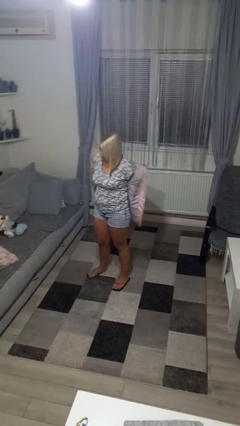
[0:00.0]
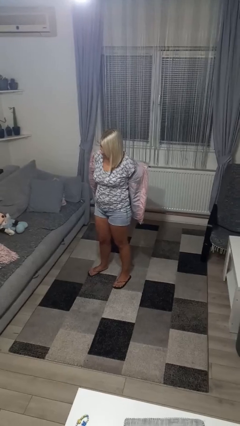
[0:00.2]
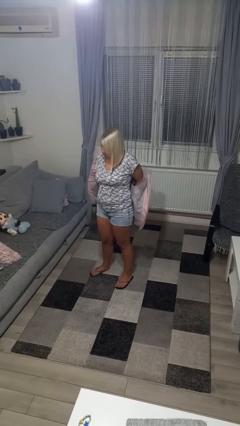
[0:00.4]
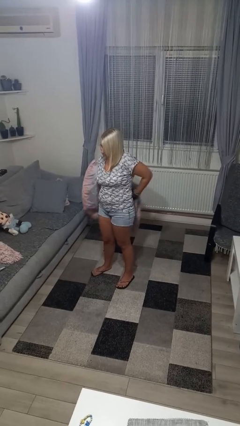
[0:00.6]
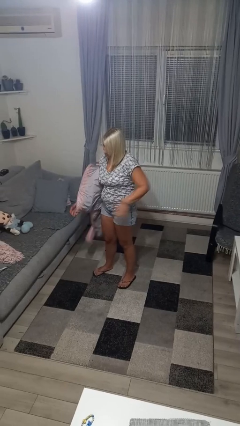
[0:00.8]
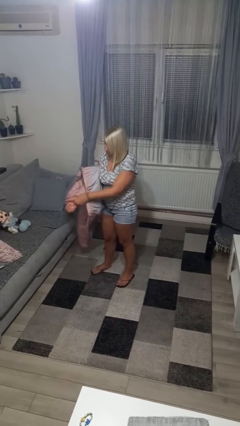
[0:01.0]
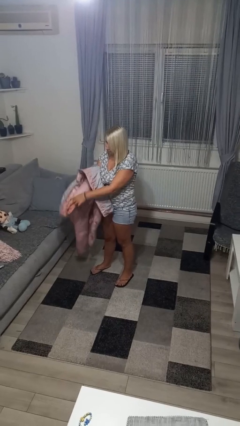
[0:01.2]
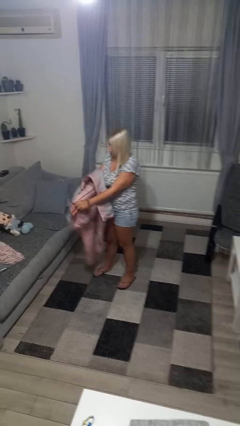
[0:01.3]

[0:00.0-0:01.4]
person takes off jacket

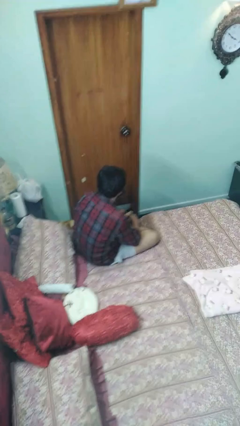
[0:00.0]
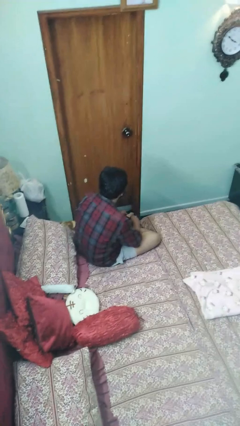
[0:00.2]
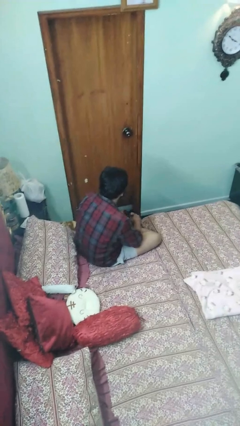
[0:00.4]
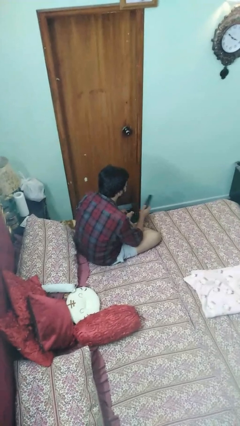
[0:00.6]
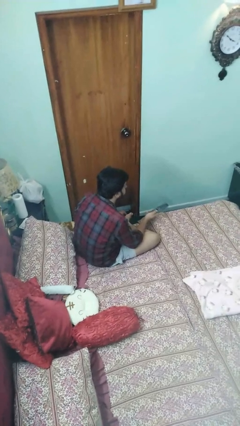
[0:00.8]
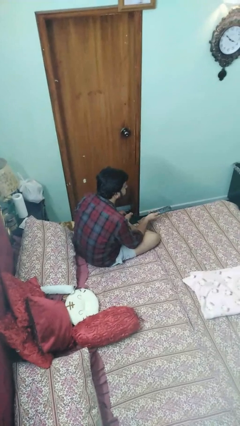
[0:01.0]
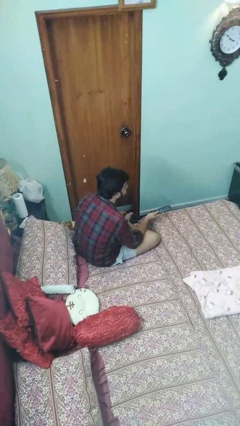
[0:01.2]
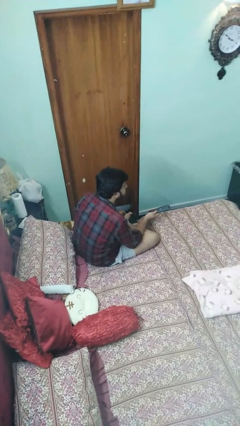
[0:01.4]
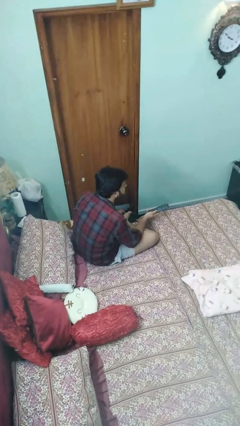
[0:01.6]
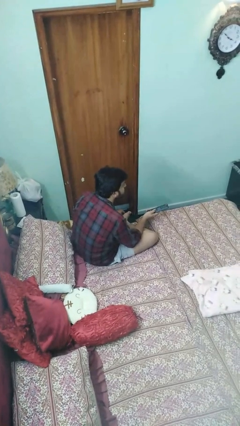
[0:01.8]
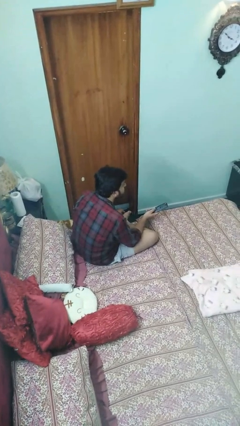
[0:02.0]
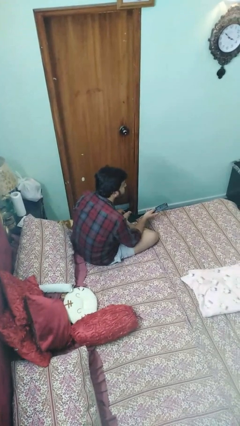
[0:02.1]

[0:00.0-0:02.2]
person uses television remote

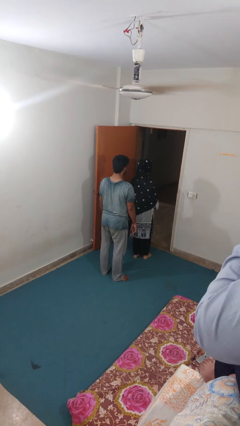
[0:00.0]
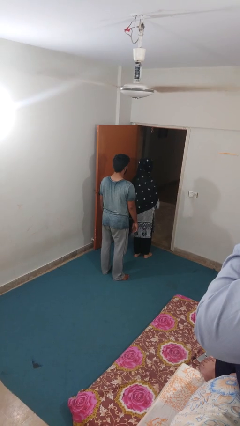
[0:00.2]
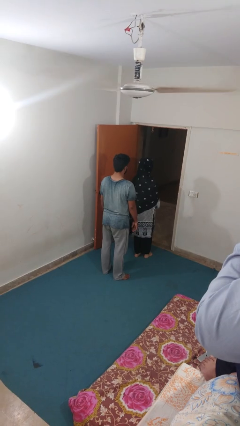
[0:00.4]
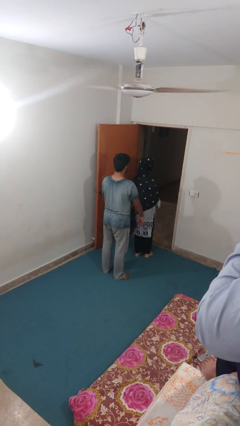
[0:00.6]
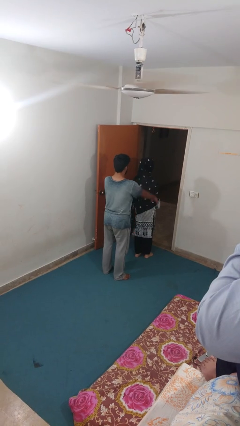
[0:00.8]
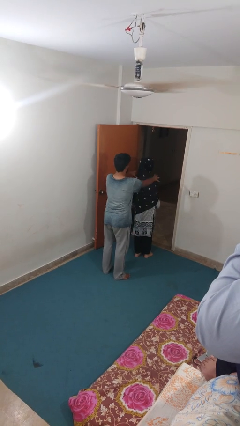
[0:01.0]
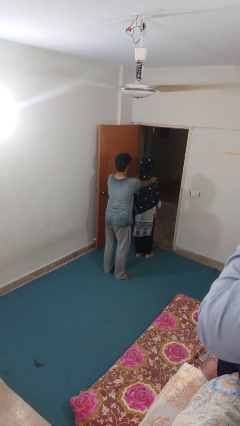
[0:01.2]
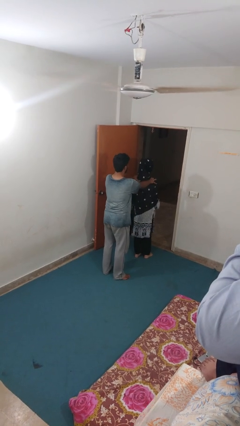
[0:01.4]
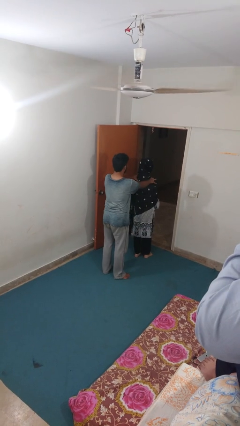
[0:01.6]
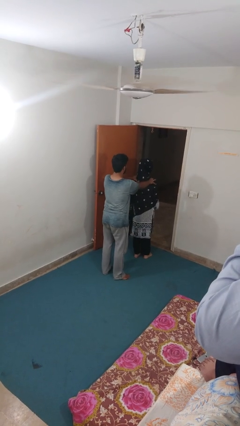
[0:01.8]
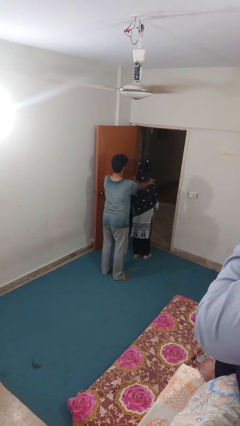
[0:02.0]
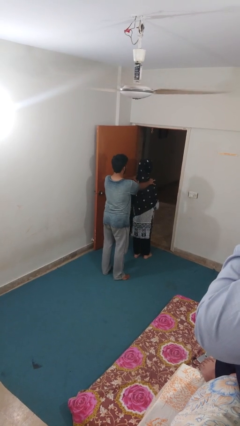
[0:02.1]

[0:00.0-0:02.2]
person grabs person by shoulder

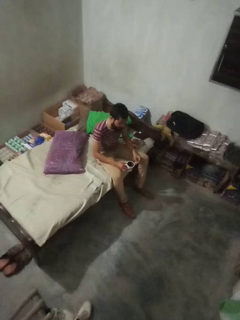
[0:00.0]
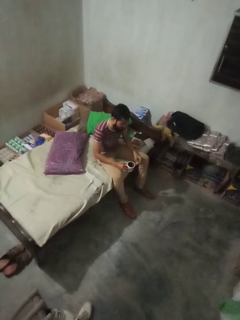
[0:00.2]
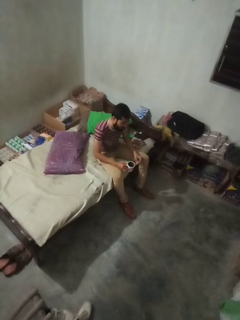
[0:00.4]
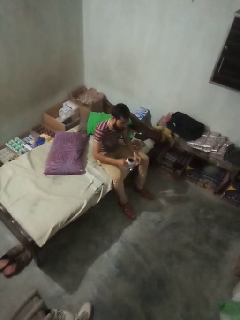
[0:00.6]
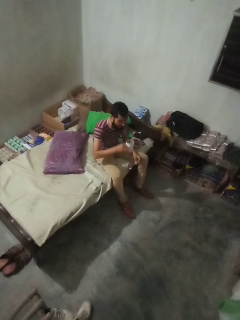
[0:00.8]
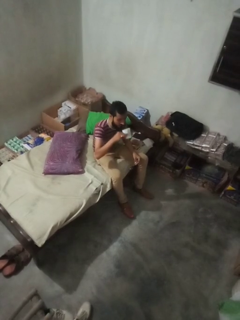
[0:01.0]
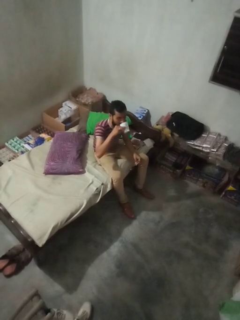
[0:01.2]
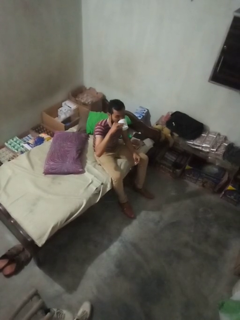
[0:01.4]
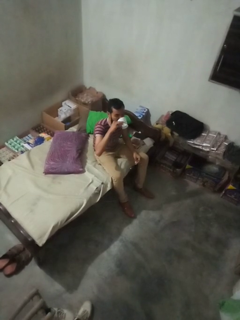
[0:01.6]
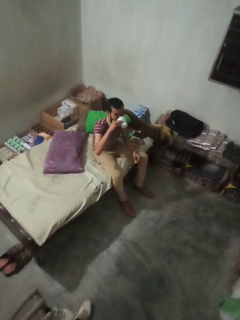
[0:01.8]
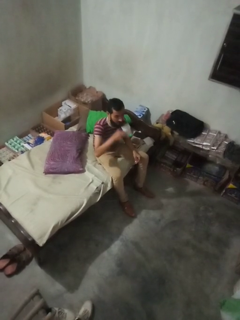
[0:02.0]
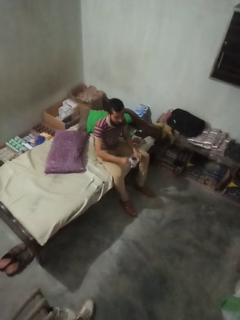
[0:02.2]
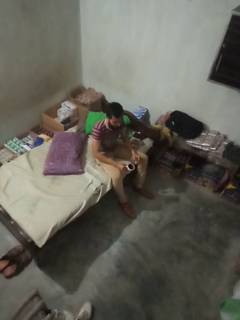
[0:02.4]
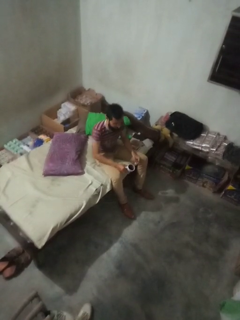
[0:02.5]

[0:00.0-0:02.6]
person drinks from mug

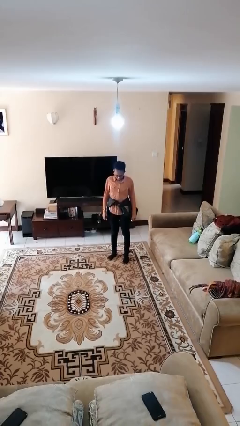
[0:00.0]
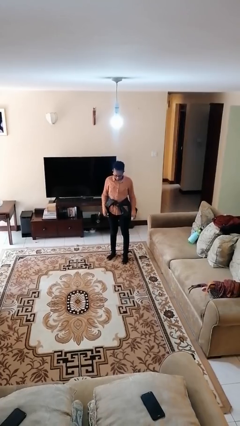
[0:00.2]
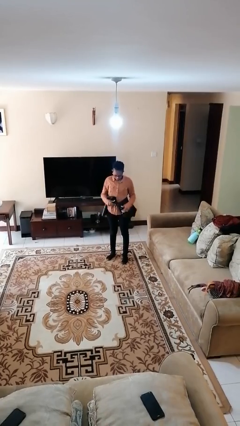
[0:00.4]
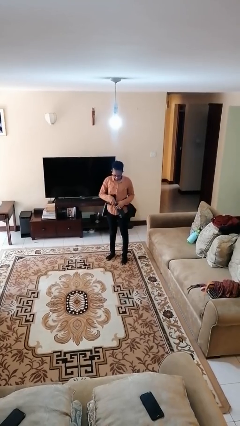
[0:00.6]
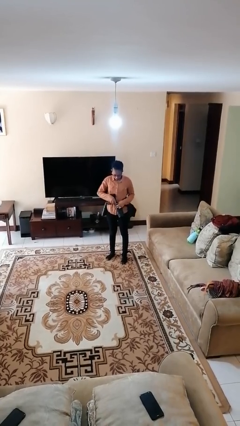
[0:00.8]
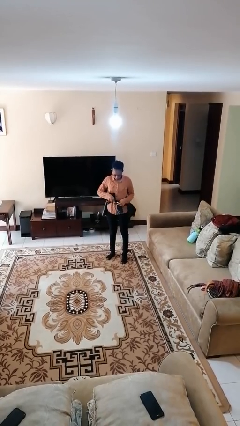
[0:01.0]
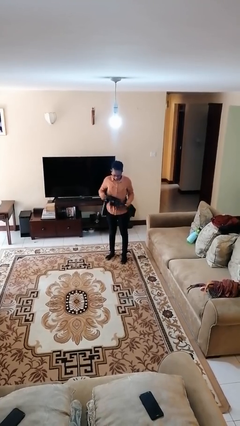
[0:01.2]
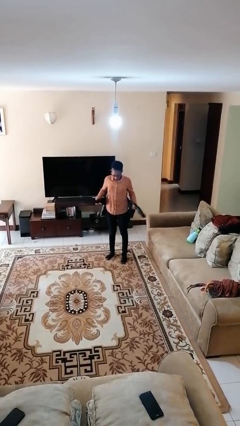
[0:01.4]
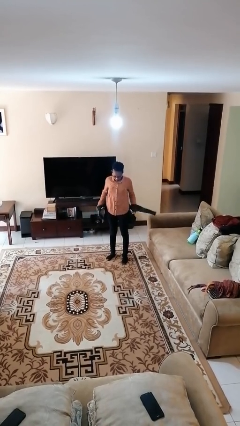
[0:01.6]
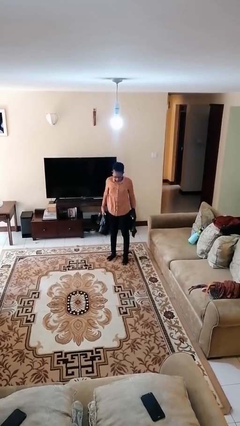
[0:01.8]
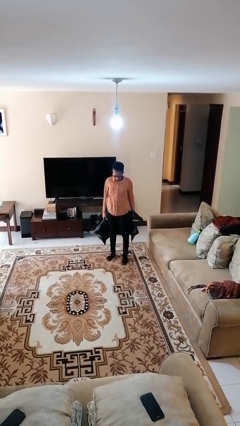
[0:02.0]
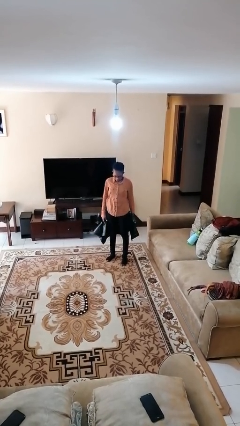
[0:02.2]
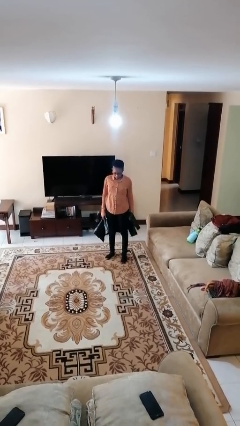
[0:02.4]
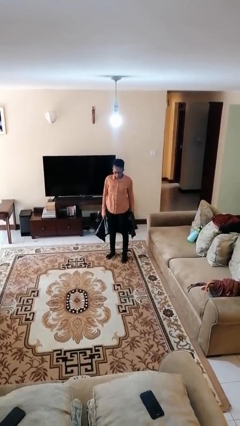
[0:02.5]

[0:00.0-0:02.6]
person unties jacket around waist

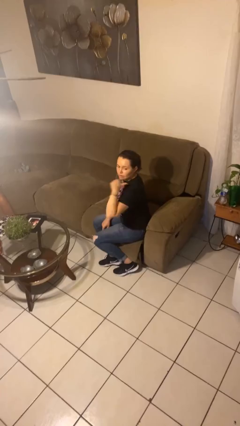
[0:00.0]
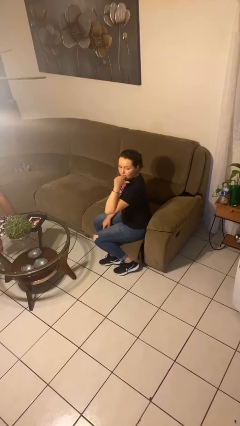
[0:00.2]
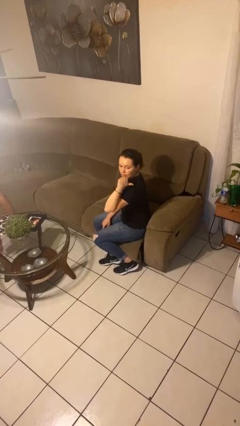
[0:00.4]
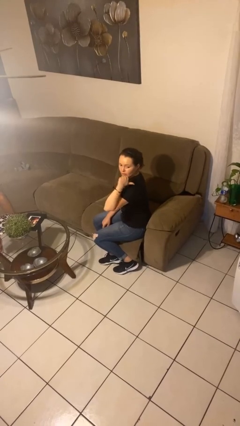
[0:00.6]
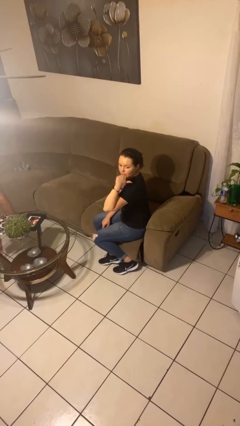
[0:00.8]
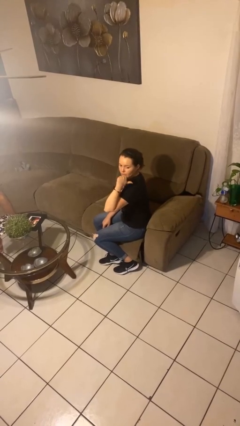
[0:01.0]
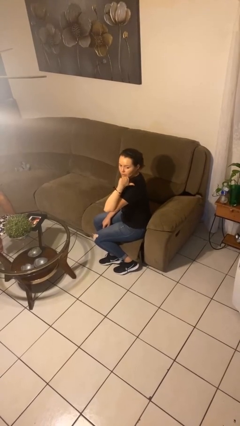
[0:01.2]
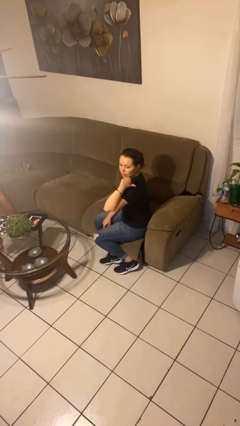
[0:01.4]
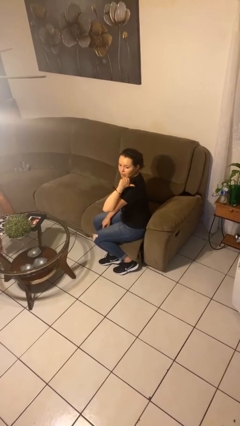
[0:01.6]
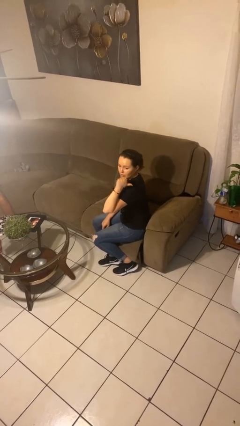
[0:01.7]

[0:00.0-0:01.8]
person gestures behind me

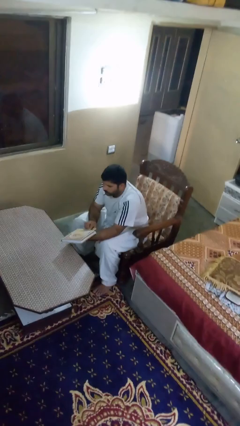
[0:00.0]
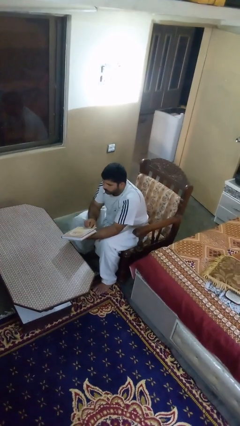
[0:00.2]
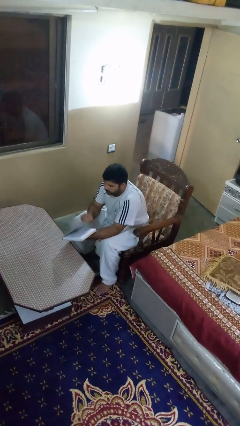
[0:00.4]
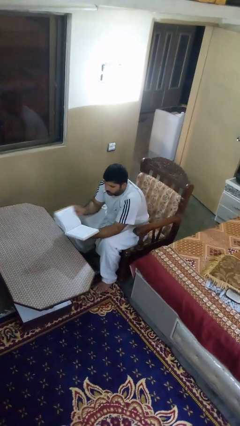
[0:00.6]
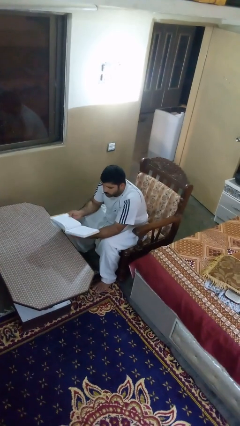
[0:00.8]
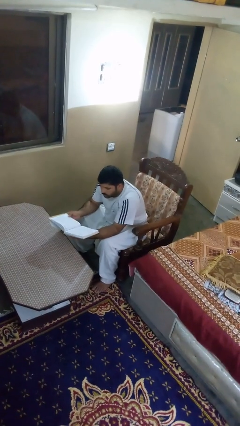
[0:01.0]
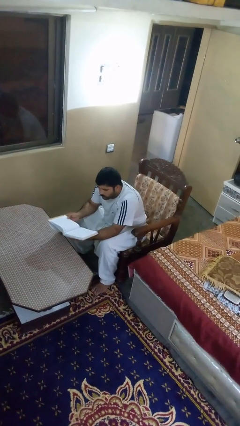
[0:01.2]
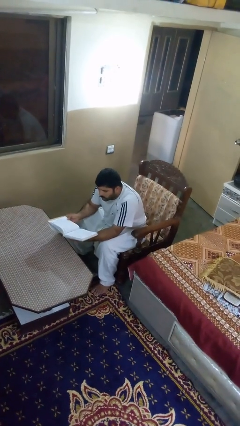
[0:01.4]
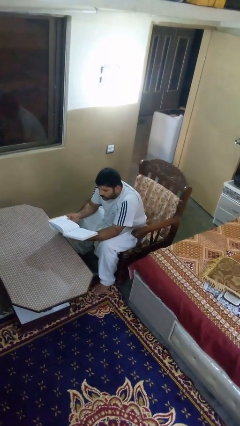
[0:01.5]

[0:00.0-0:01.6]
person reads book

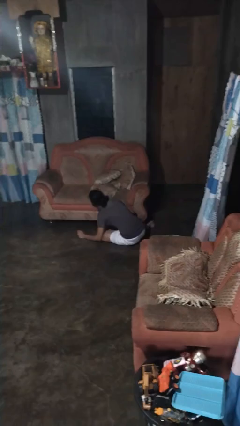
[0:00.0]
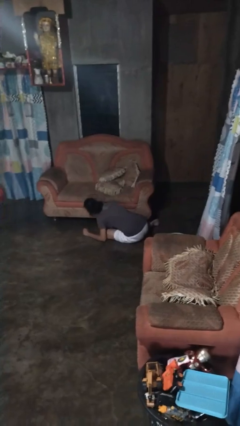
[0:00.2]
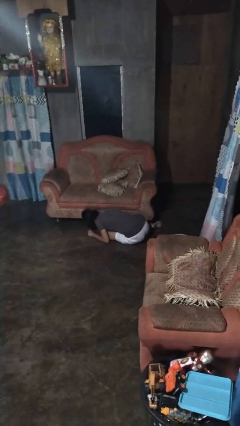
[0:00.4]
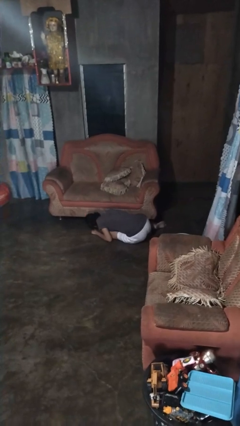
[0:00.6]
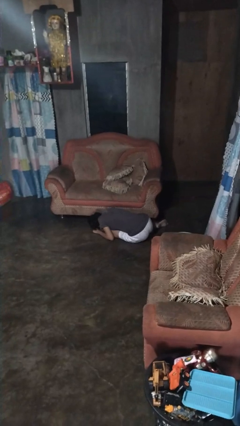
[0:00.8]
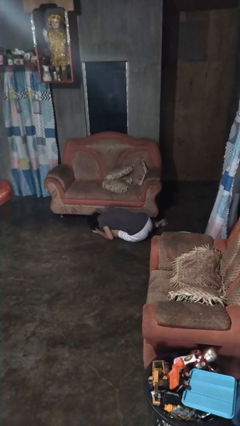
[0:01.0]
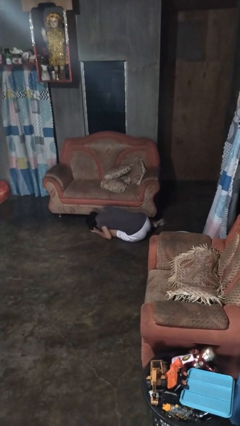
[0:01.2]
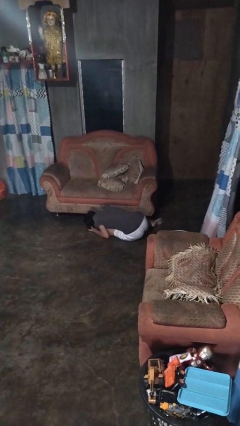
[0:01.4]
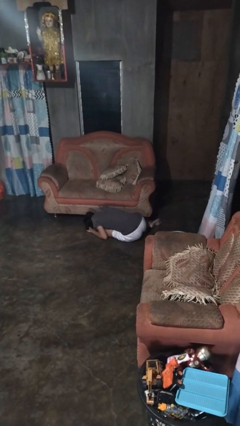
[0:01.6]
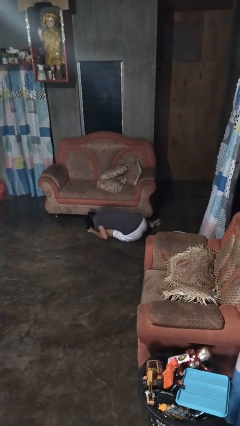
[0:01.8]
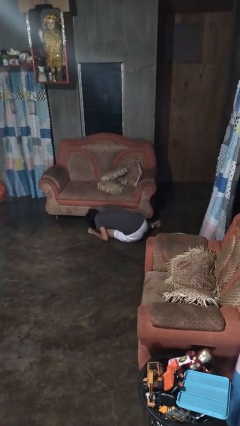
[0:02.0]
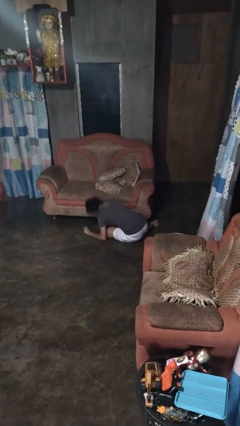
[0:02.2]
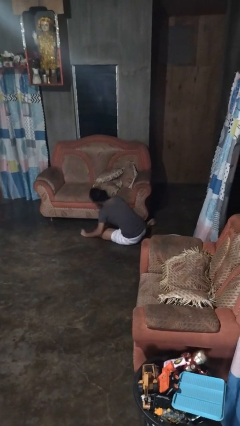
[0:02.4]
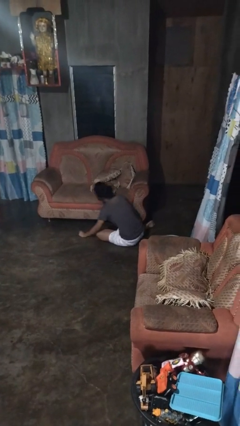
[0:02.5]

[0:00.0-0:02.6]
person searches under couch

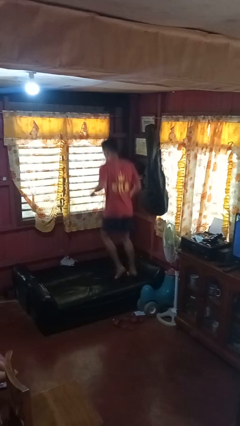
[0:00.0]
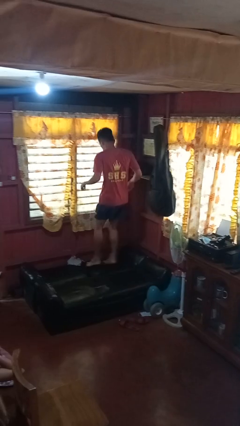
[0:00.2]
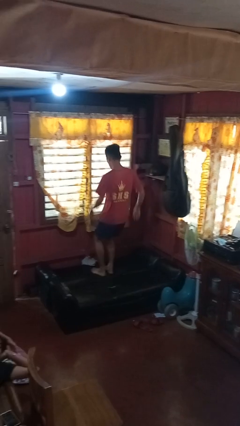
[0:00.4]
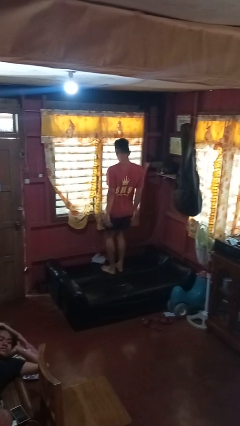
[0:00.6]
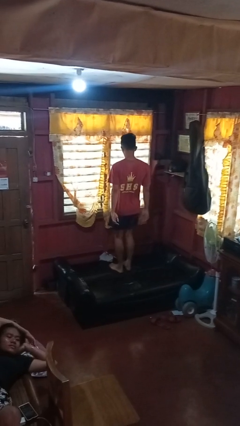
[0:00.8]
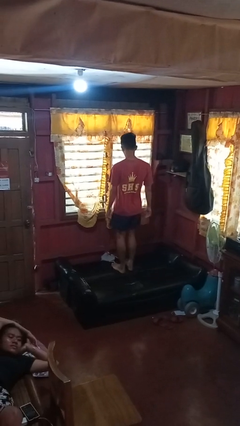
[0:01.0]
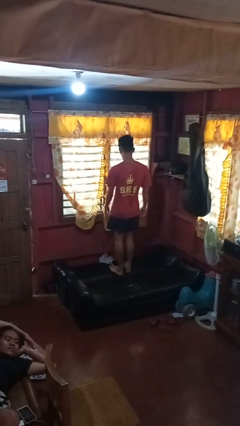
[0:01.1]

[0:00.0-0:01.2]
person jumps on couch
